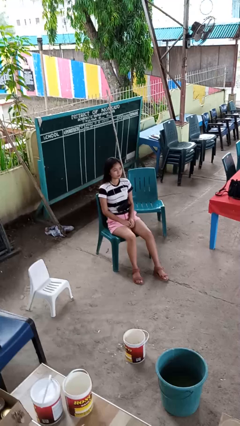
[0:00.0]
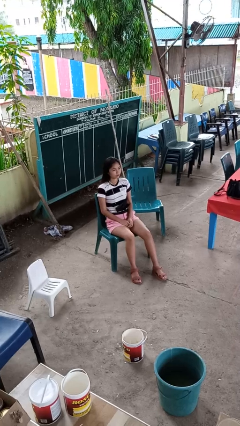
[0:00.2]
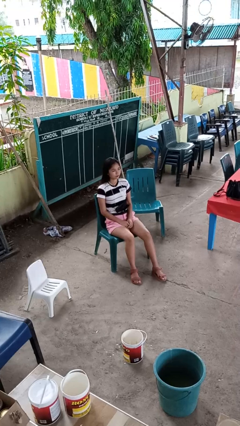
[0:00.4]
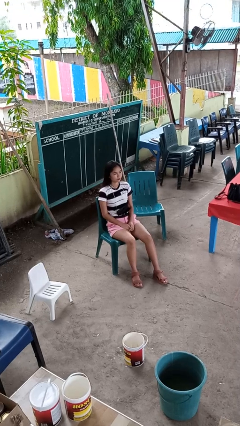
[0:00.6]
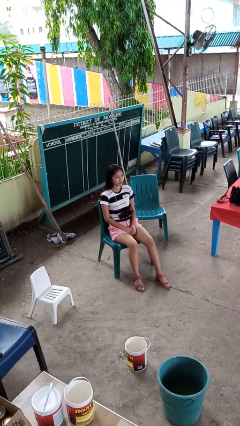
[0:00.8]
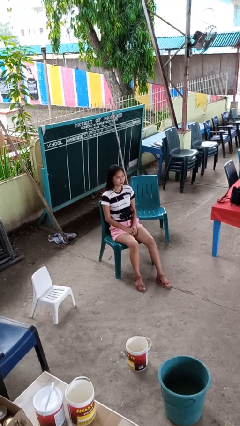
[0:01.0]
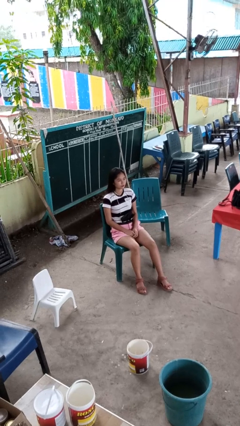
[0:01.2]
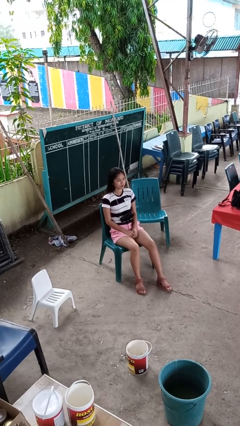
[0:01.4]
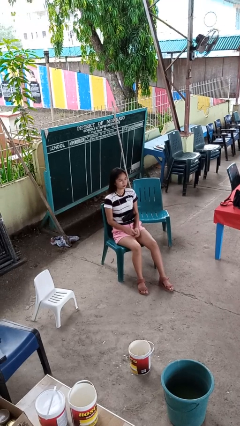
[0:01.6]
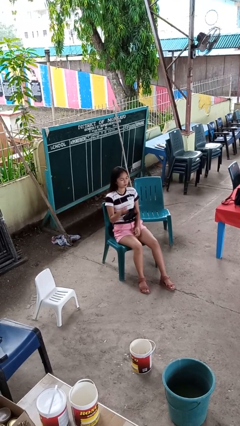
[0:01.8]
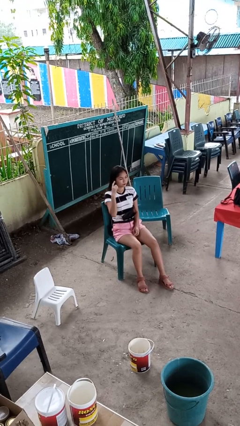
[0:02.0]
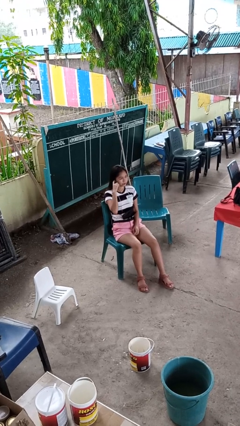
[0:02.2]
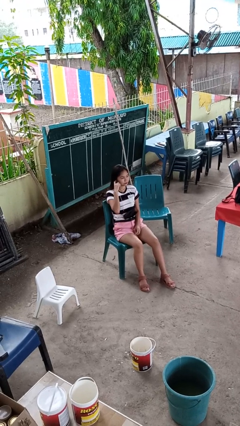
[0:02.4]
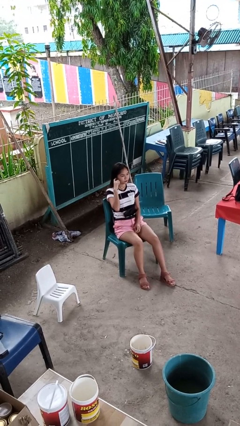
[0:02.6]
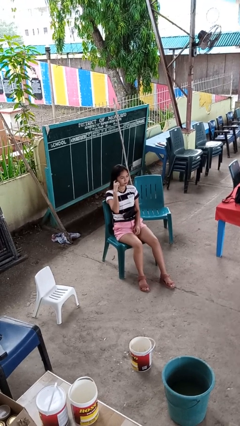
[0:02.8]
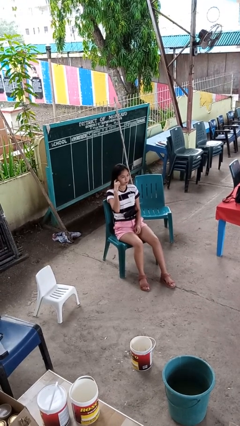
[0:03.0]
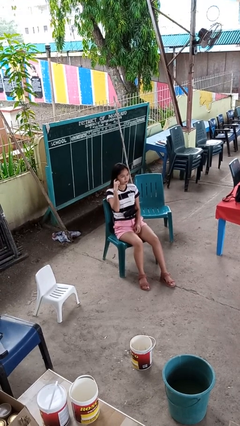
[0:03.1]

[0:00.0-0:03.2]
person gestures listen closely

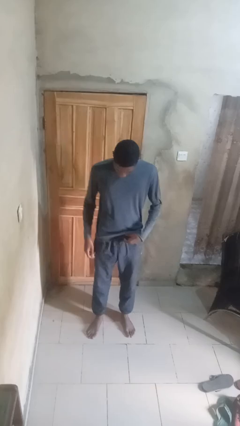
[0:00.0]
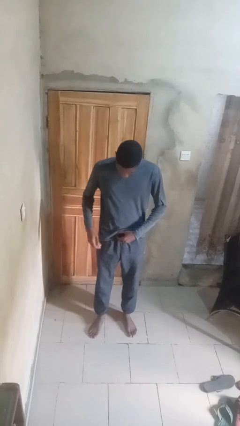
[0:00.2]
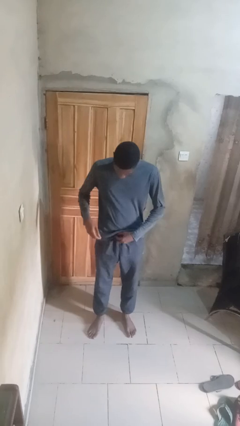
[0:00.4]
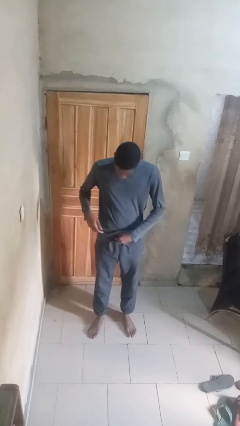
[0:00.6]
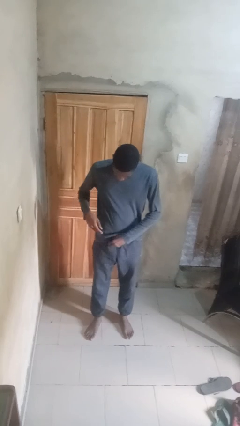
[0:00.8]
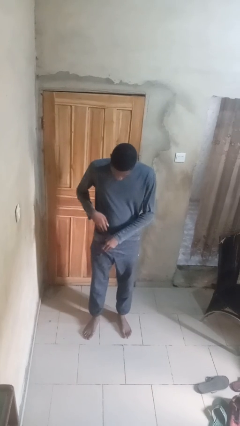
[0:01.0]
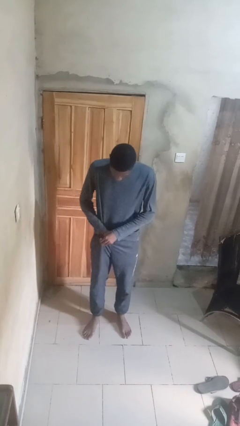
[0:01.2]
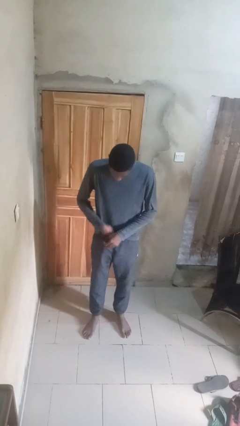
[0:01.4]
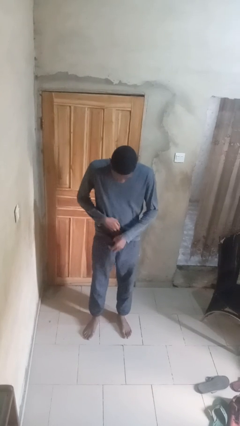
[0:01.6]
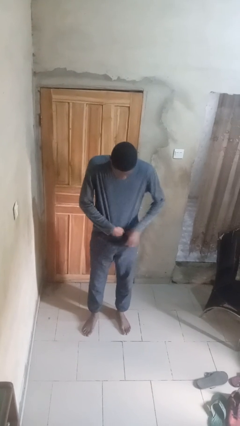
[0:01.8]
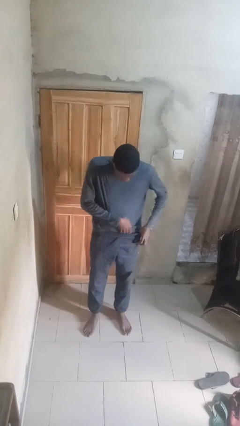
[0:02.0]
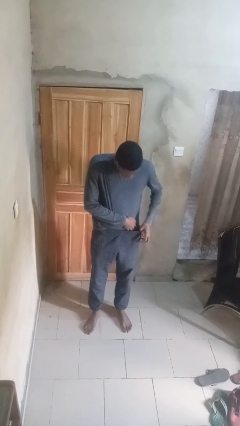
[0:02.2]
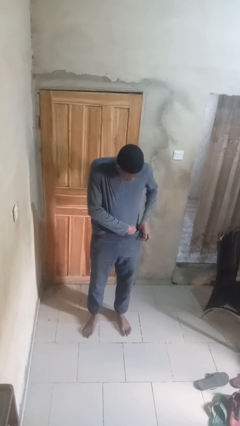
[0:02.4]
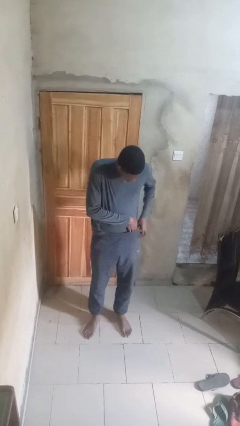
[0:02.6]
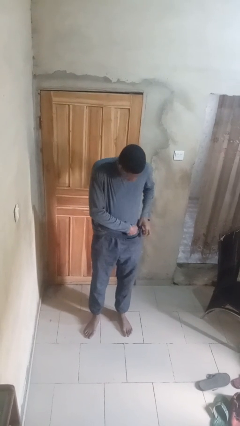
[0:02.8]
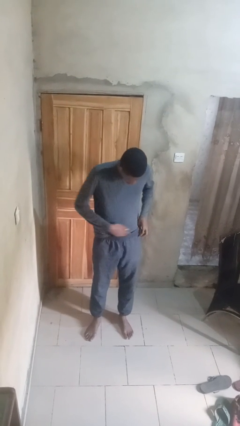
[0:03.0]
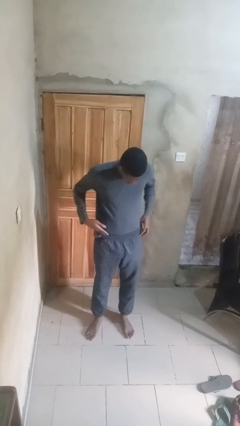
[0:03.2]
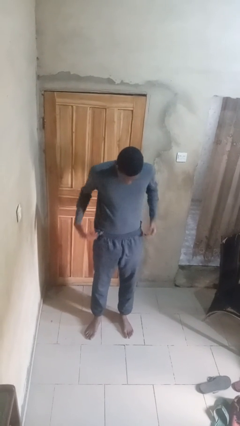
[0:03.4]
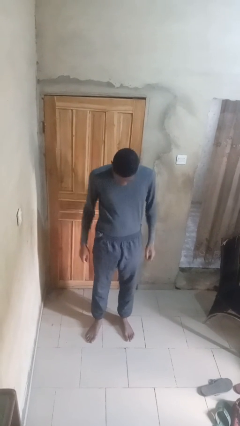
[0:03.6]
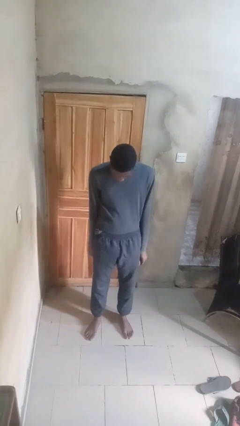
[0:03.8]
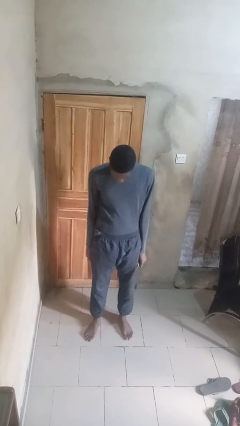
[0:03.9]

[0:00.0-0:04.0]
person tucks in shirt

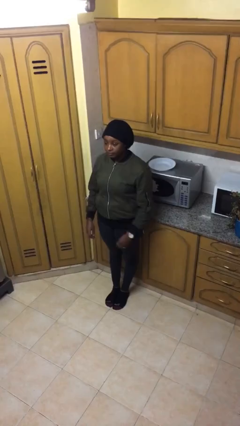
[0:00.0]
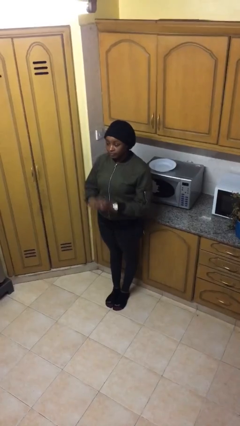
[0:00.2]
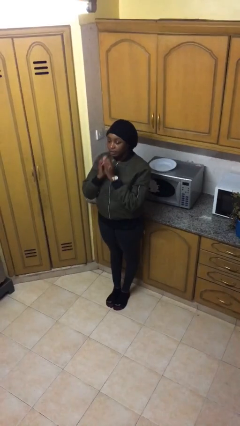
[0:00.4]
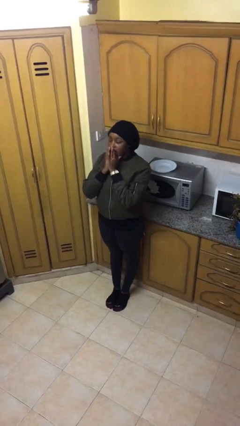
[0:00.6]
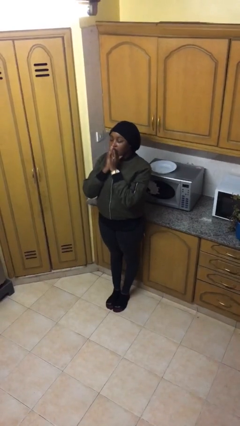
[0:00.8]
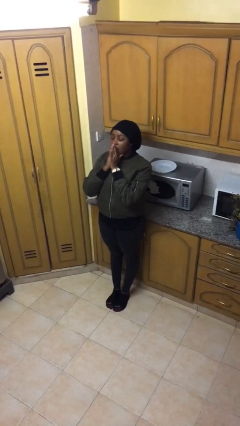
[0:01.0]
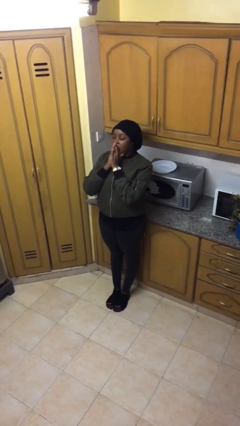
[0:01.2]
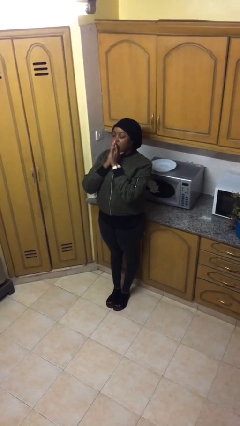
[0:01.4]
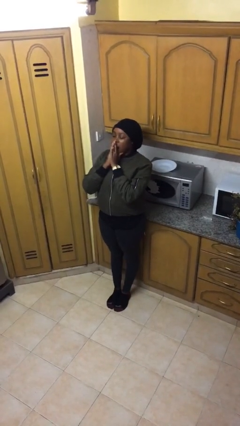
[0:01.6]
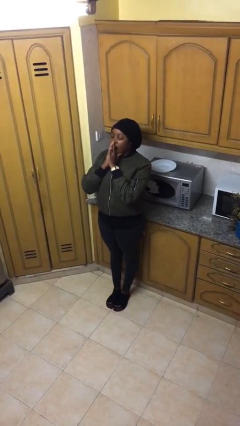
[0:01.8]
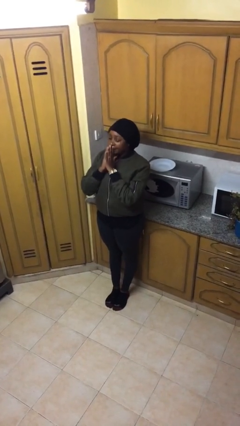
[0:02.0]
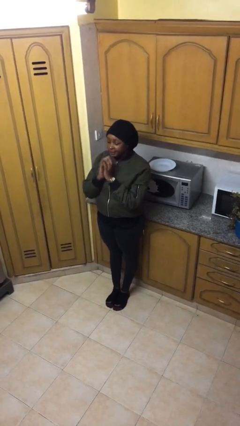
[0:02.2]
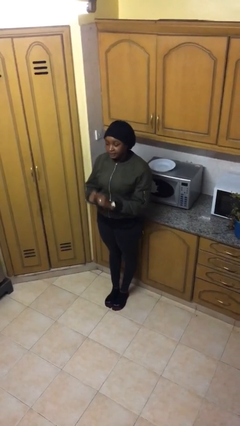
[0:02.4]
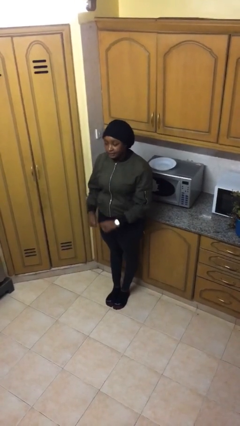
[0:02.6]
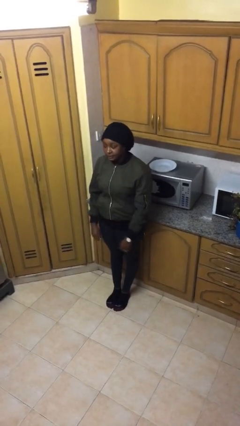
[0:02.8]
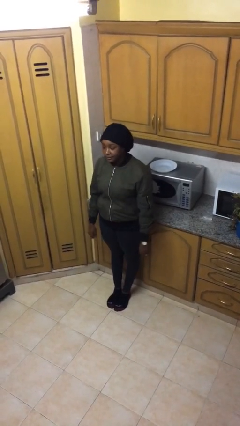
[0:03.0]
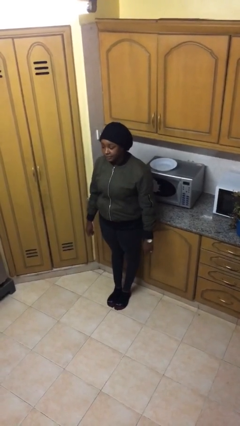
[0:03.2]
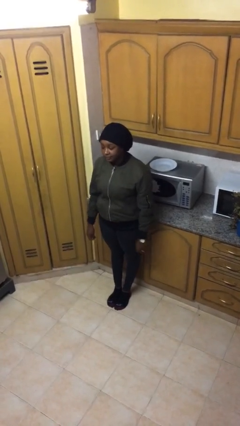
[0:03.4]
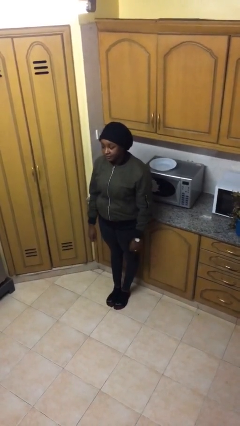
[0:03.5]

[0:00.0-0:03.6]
person yawns

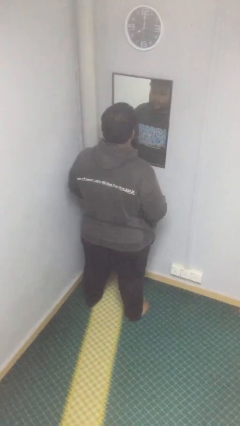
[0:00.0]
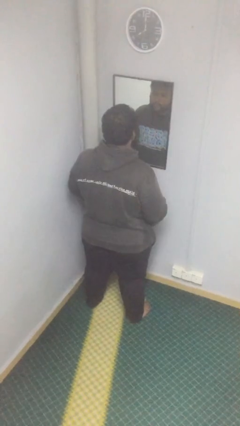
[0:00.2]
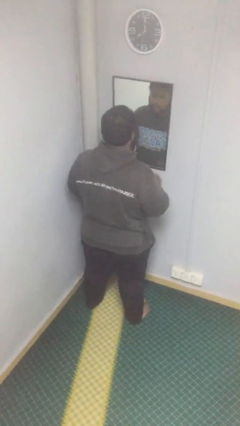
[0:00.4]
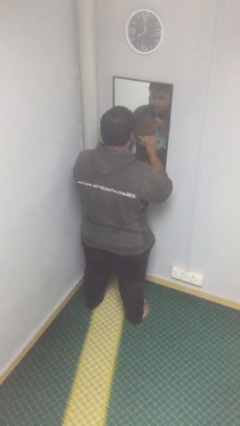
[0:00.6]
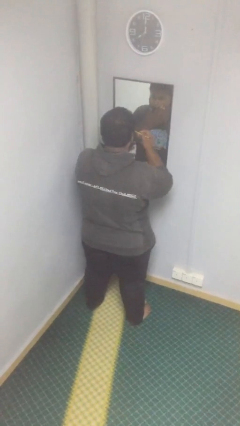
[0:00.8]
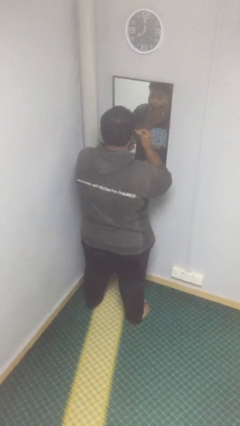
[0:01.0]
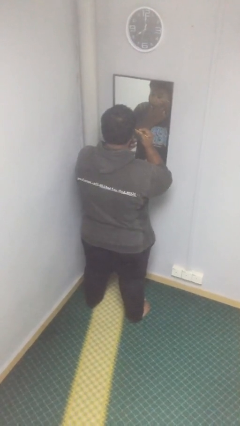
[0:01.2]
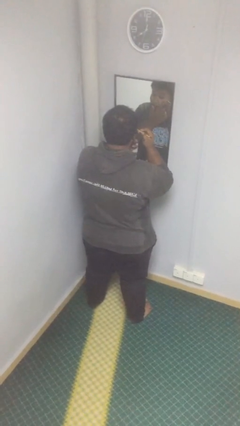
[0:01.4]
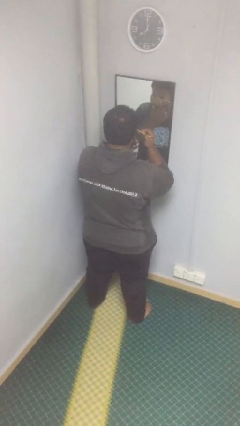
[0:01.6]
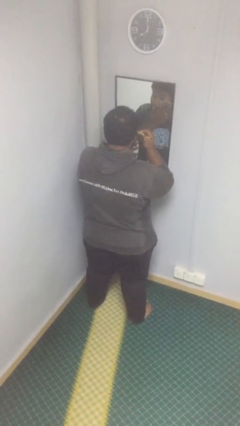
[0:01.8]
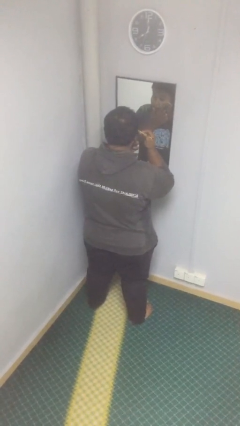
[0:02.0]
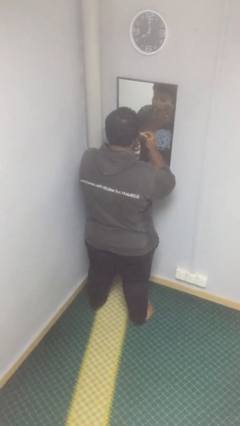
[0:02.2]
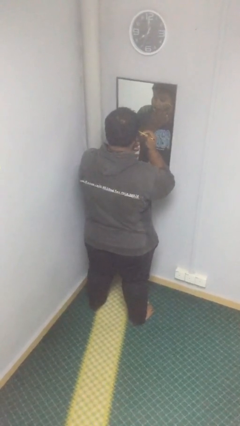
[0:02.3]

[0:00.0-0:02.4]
person applies eye makeup

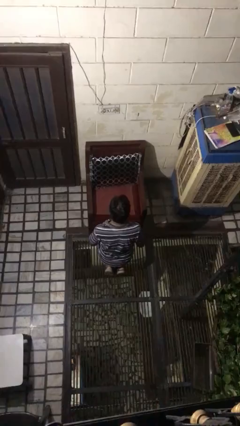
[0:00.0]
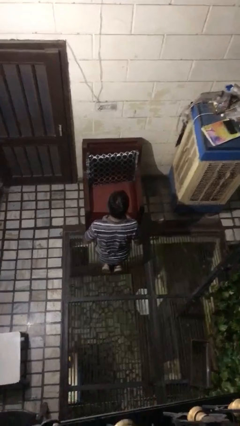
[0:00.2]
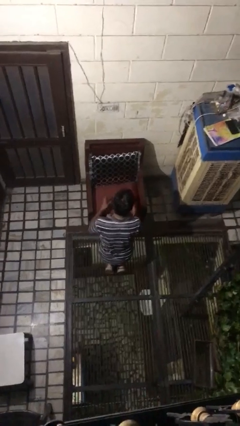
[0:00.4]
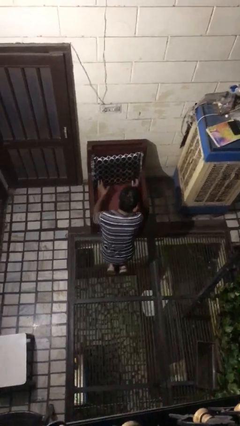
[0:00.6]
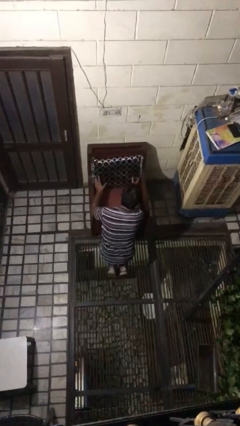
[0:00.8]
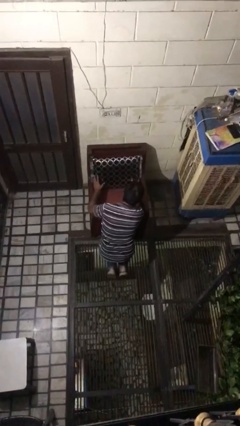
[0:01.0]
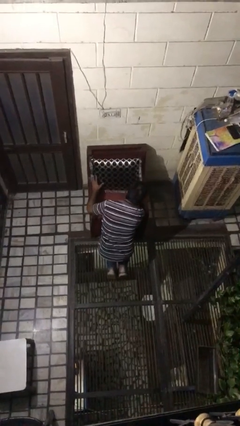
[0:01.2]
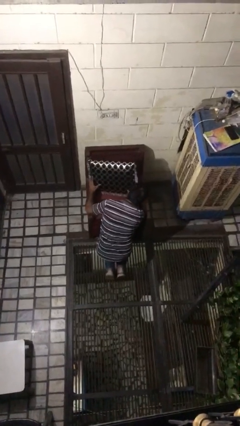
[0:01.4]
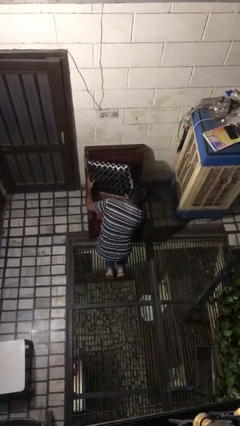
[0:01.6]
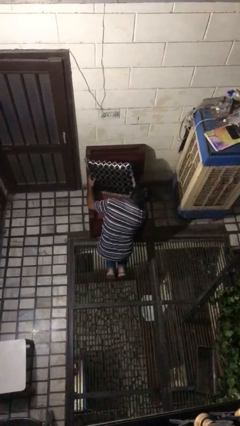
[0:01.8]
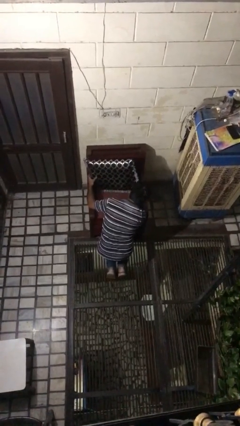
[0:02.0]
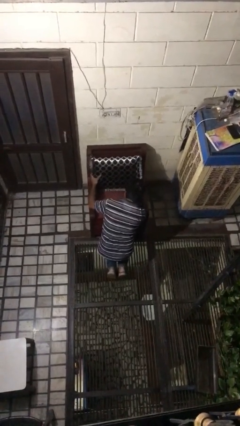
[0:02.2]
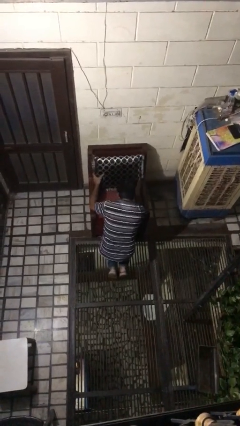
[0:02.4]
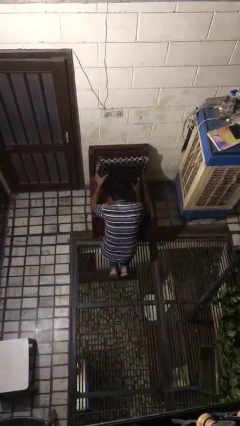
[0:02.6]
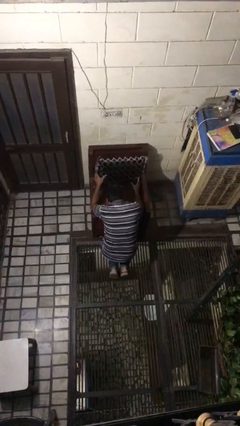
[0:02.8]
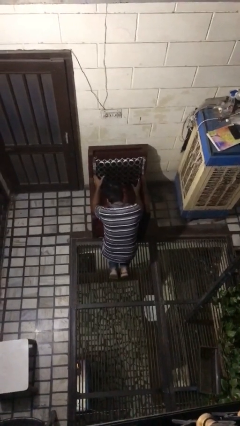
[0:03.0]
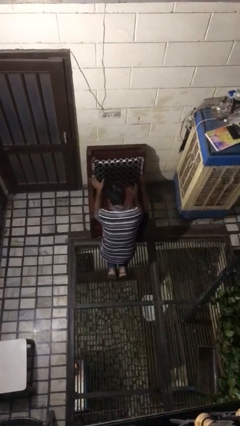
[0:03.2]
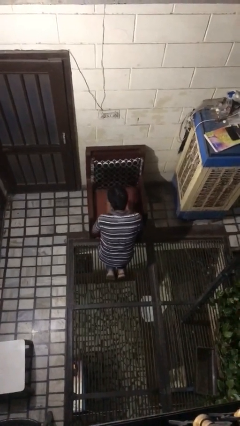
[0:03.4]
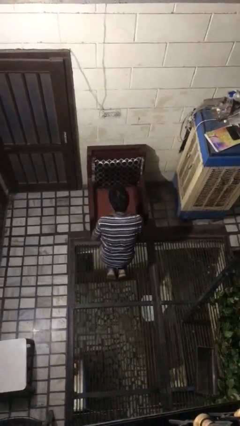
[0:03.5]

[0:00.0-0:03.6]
person searches in couch

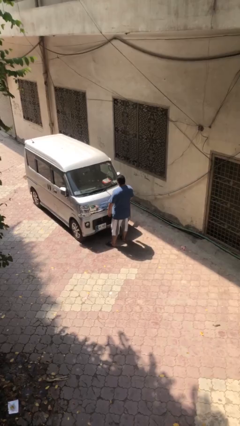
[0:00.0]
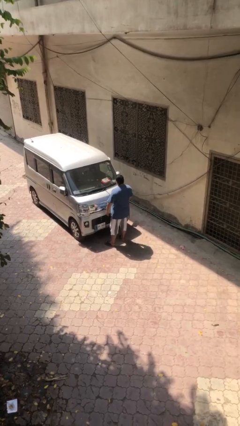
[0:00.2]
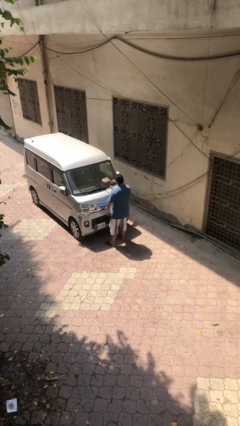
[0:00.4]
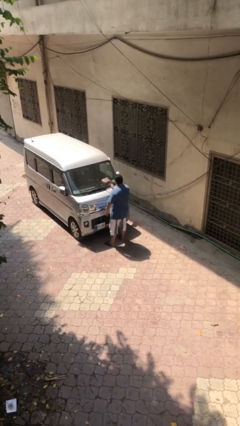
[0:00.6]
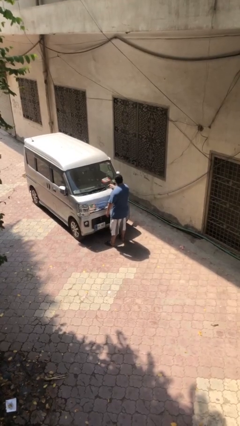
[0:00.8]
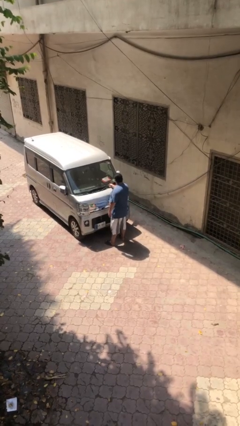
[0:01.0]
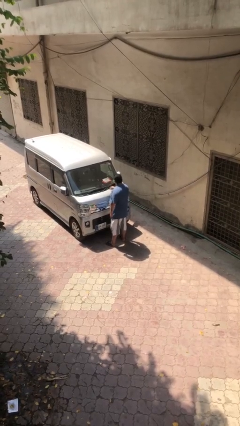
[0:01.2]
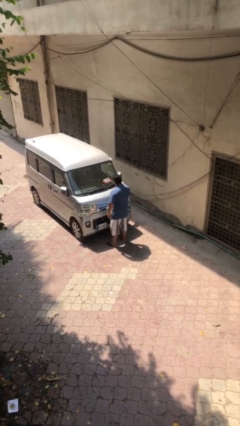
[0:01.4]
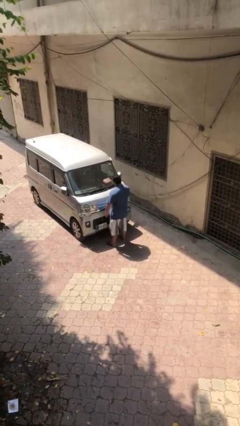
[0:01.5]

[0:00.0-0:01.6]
person flips down car wipers
